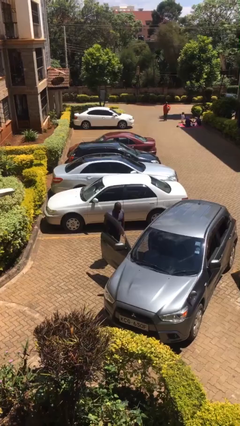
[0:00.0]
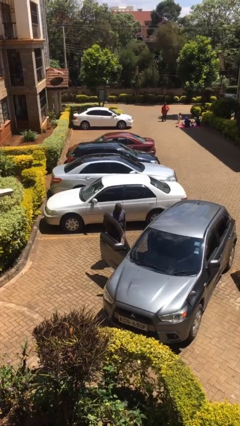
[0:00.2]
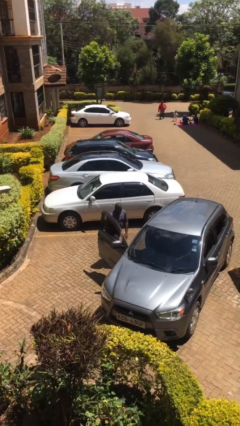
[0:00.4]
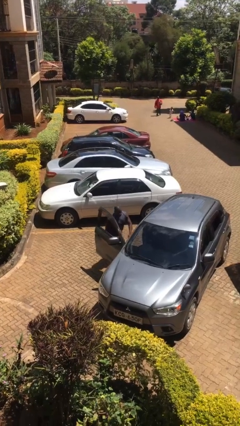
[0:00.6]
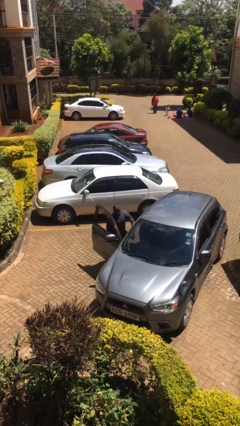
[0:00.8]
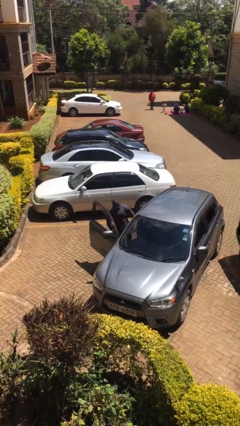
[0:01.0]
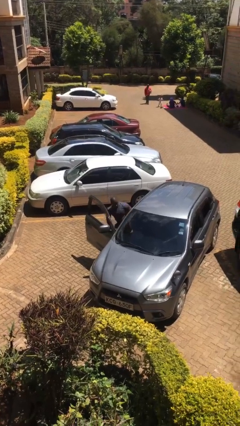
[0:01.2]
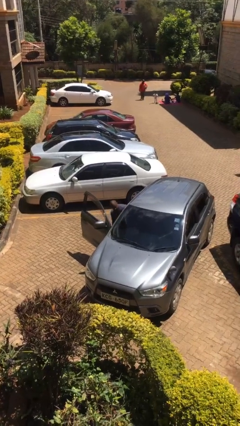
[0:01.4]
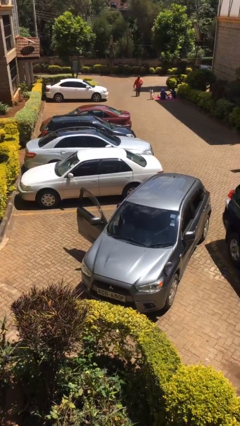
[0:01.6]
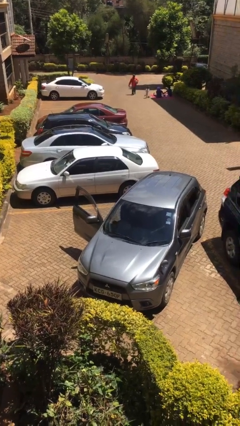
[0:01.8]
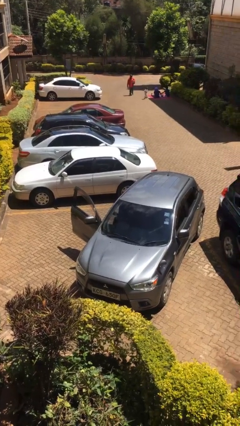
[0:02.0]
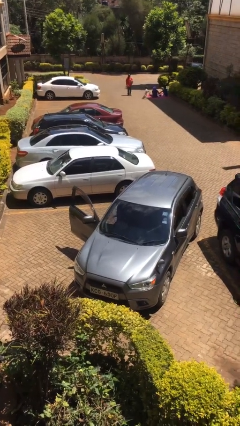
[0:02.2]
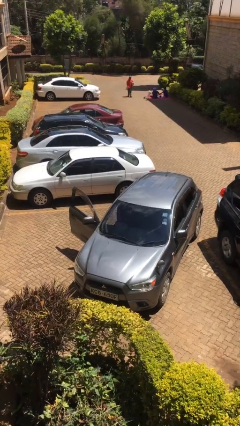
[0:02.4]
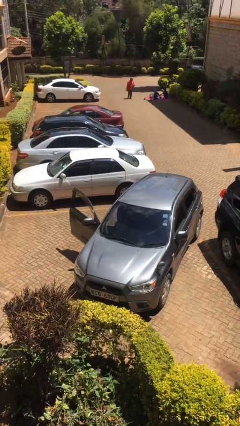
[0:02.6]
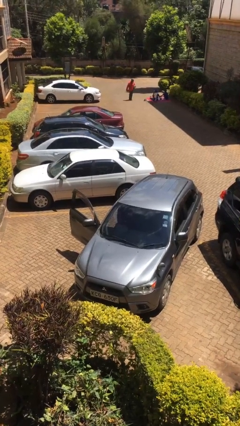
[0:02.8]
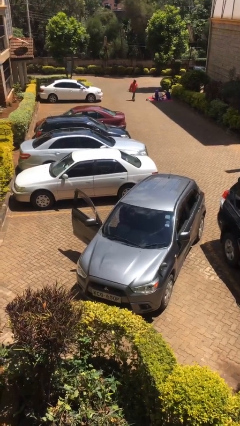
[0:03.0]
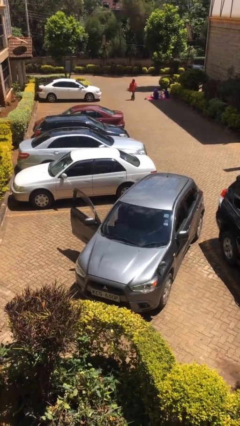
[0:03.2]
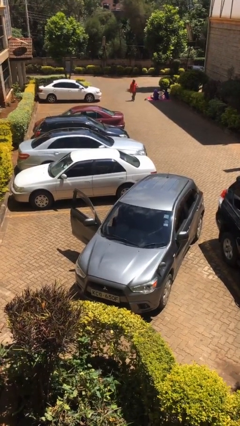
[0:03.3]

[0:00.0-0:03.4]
person enters car

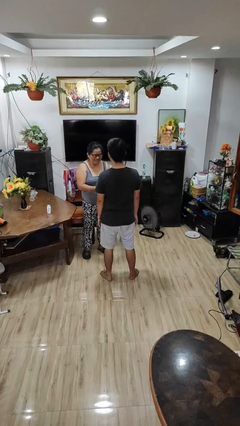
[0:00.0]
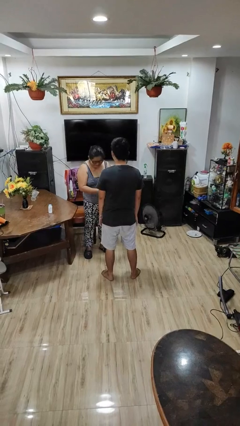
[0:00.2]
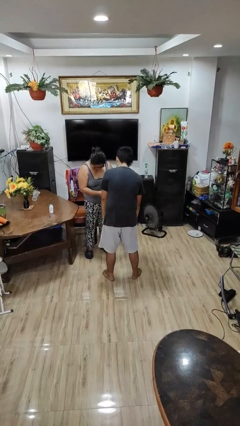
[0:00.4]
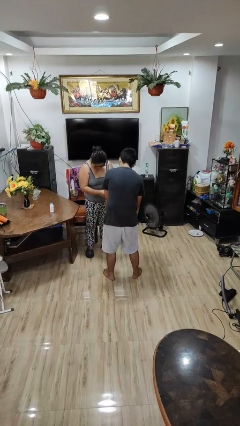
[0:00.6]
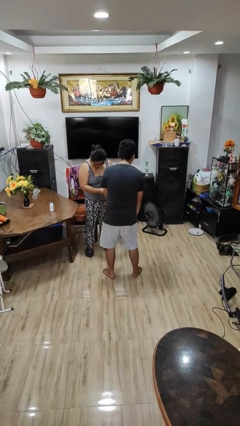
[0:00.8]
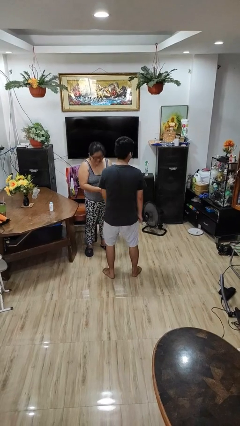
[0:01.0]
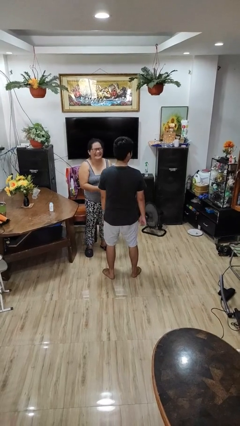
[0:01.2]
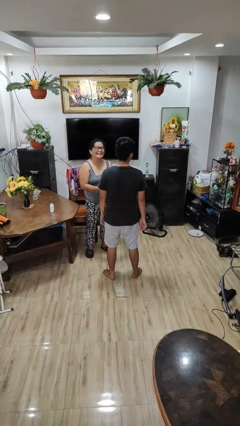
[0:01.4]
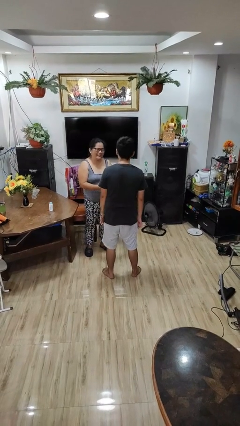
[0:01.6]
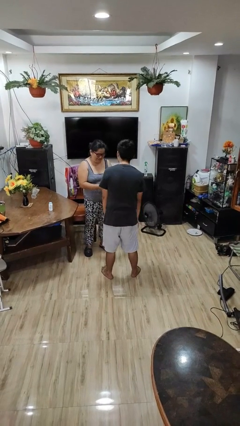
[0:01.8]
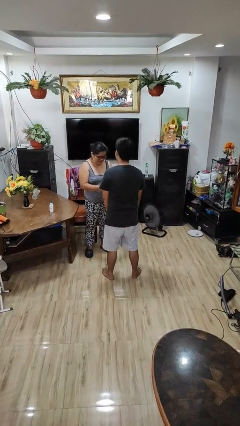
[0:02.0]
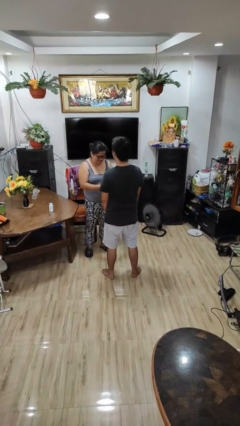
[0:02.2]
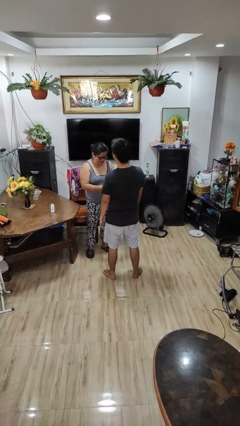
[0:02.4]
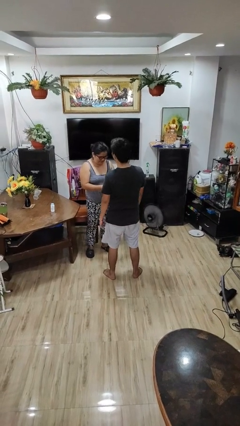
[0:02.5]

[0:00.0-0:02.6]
person laughs with person

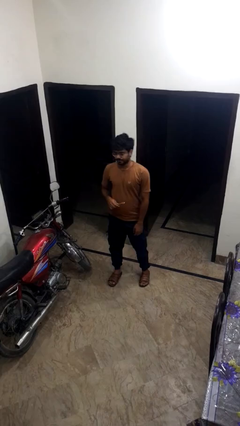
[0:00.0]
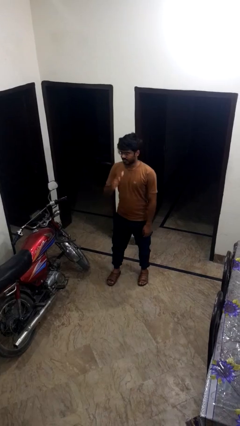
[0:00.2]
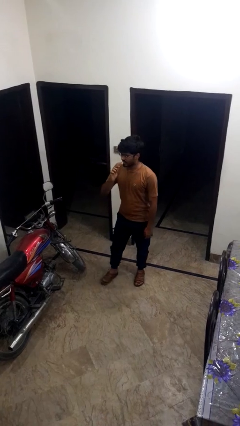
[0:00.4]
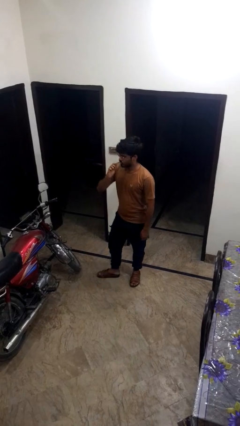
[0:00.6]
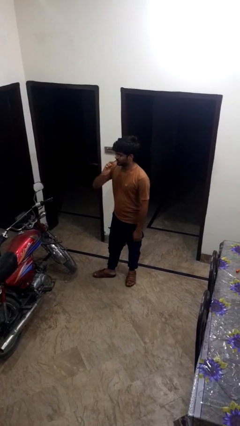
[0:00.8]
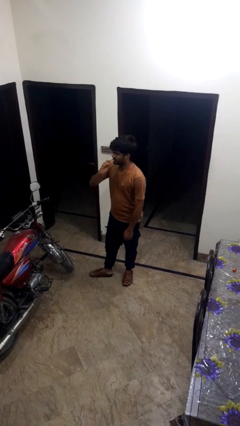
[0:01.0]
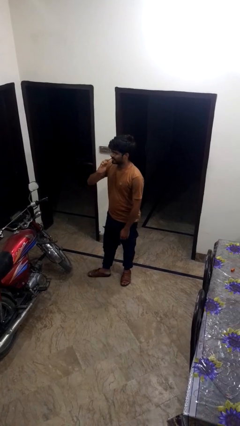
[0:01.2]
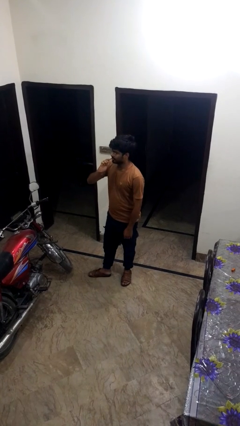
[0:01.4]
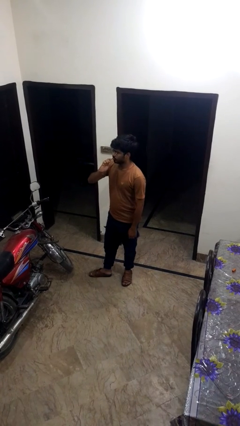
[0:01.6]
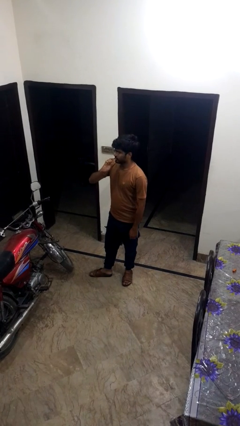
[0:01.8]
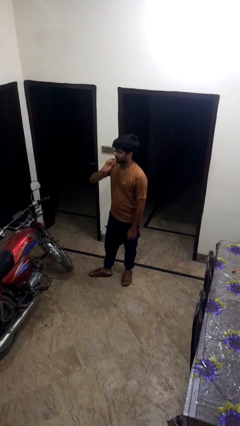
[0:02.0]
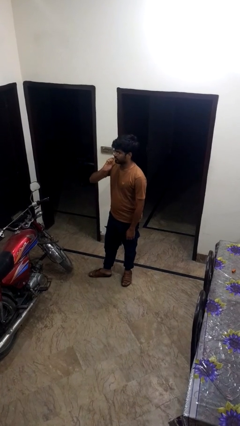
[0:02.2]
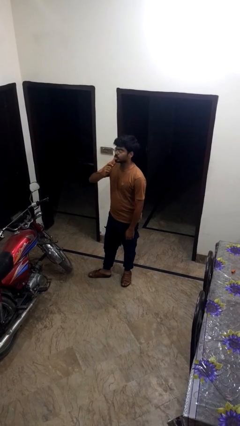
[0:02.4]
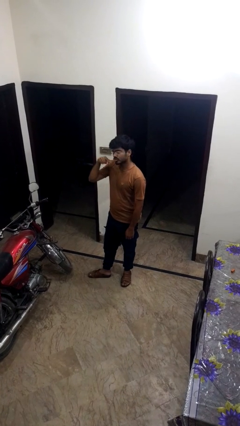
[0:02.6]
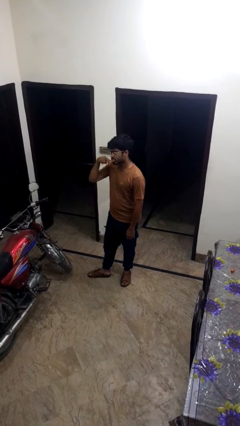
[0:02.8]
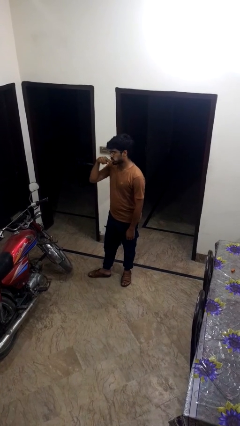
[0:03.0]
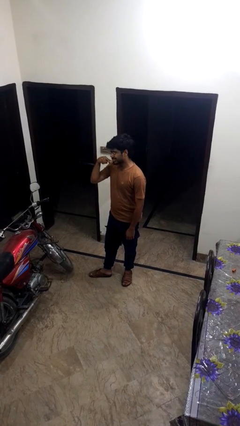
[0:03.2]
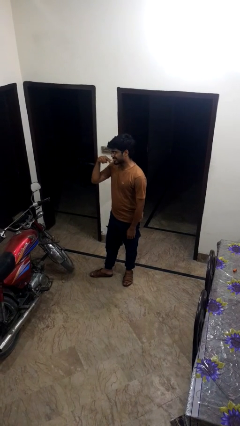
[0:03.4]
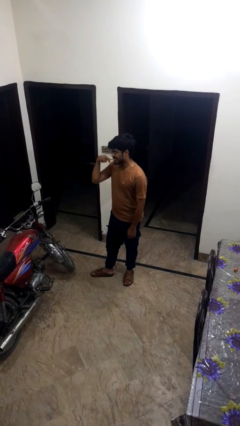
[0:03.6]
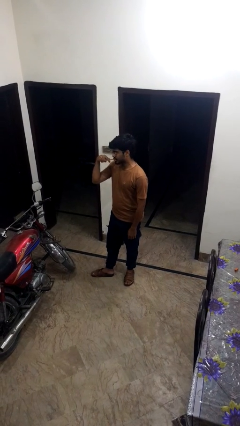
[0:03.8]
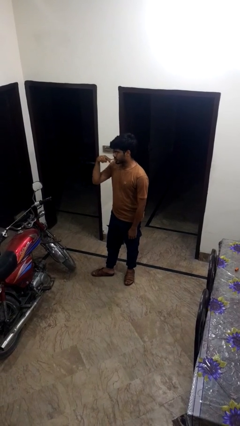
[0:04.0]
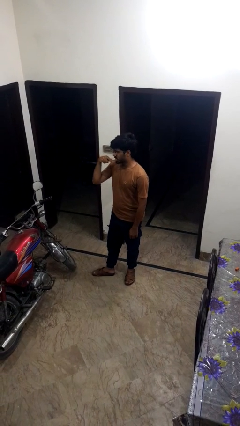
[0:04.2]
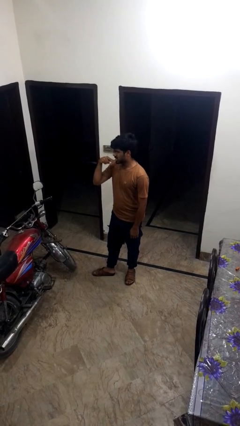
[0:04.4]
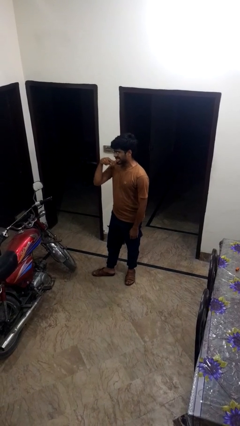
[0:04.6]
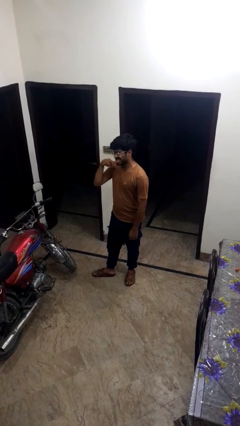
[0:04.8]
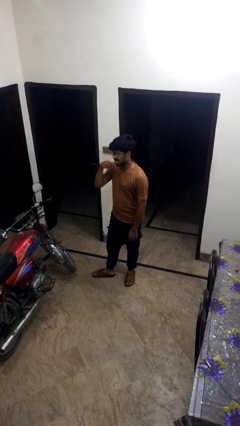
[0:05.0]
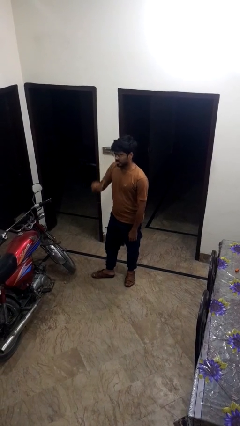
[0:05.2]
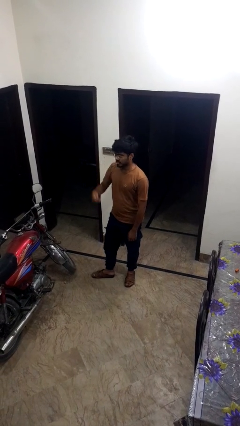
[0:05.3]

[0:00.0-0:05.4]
person brushes teeth

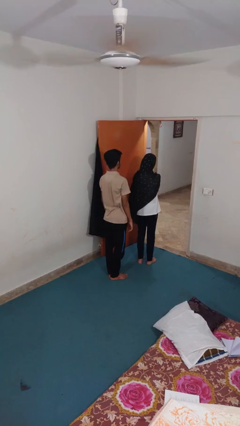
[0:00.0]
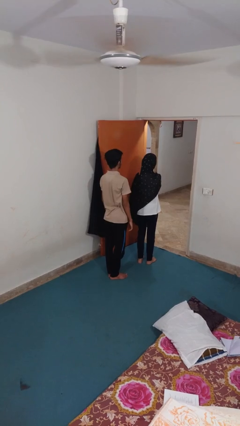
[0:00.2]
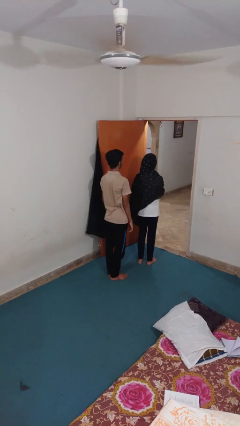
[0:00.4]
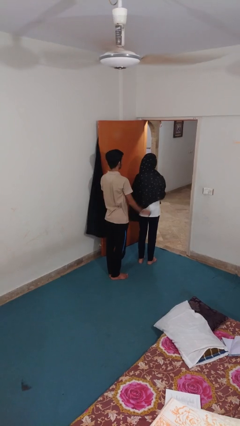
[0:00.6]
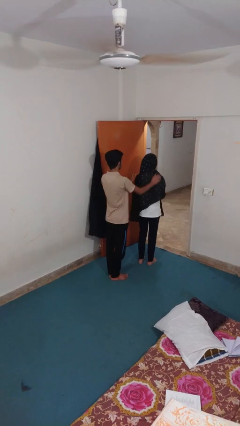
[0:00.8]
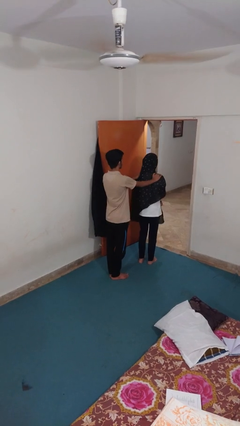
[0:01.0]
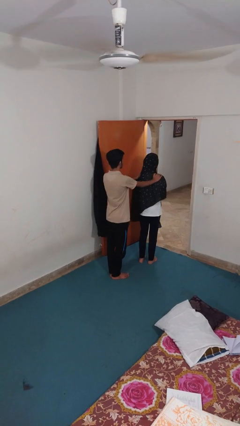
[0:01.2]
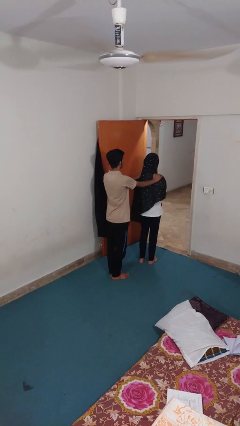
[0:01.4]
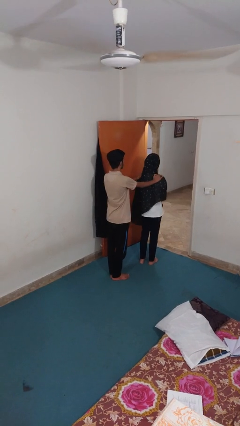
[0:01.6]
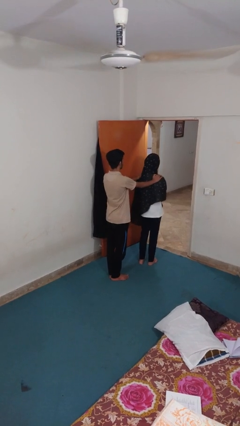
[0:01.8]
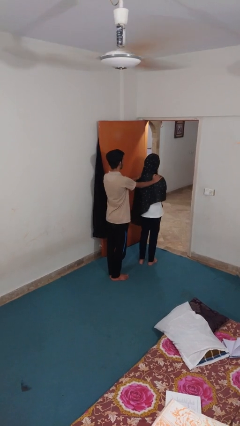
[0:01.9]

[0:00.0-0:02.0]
person grabs person by shoulder

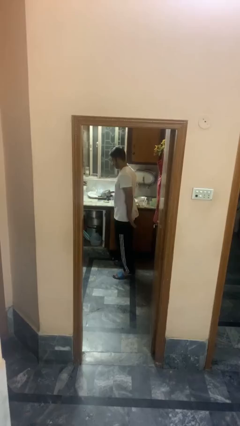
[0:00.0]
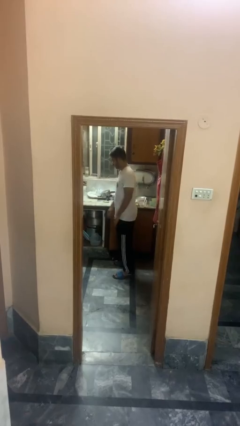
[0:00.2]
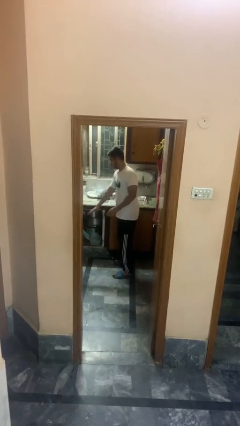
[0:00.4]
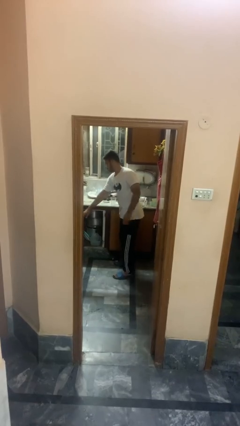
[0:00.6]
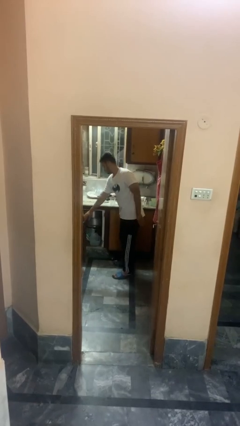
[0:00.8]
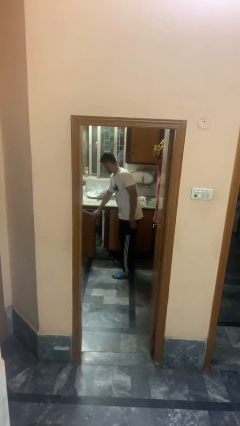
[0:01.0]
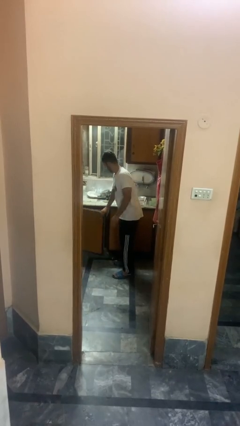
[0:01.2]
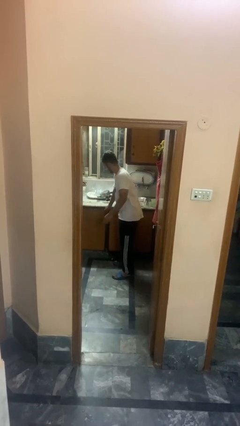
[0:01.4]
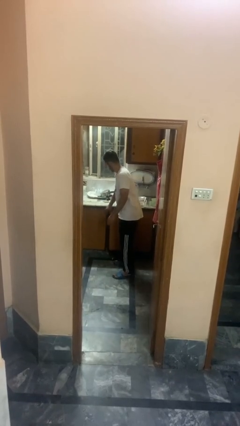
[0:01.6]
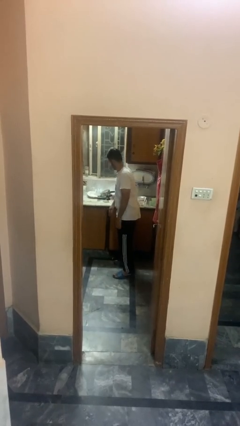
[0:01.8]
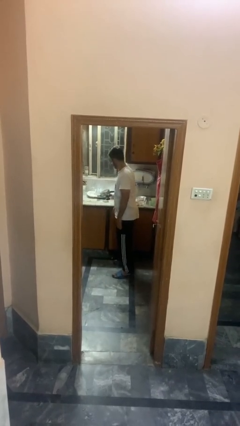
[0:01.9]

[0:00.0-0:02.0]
person closes cabinet

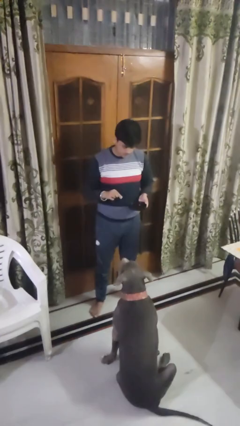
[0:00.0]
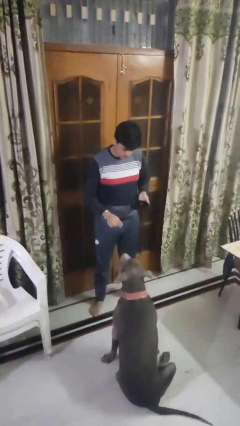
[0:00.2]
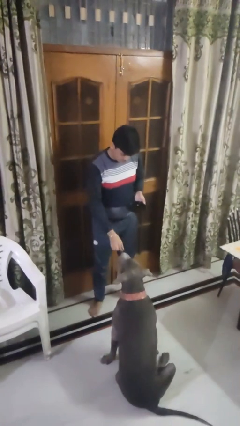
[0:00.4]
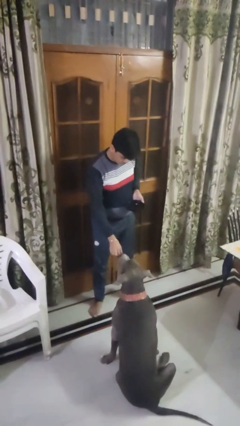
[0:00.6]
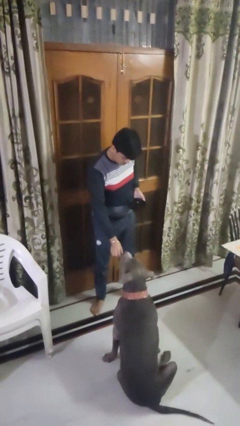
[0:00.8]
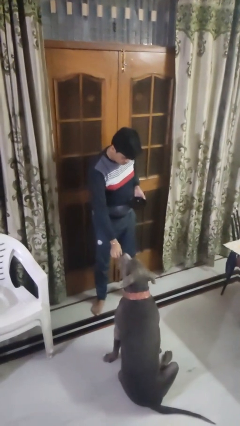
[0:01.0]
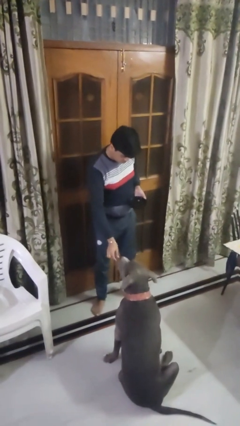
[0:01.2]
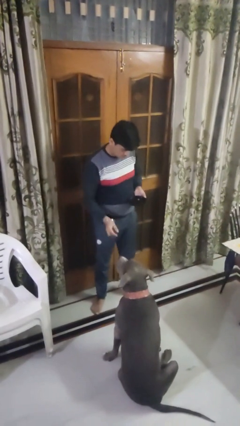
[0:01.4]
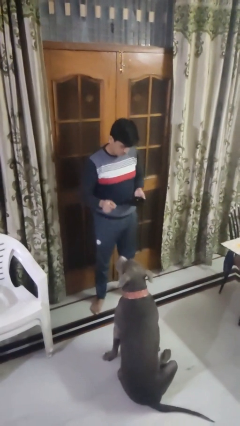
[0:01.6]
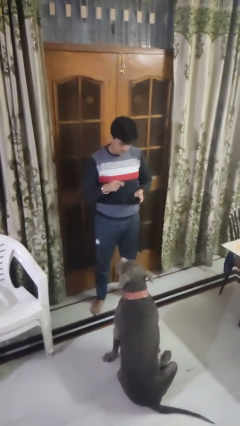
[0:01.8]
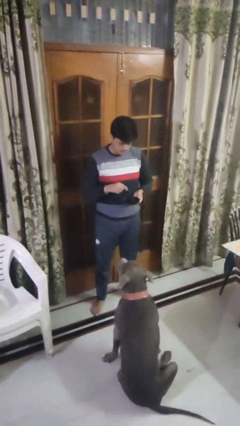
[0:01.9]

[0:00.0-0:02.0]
person feeds dog
